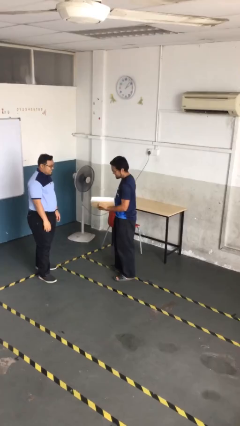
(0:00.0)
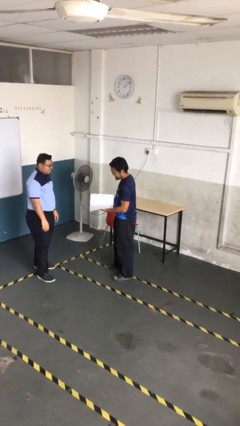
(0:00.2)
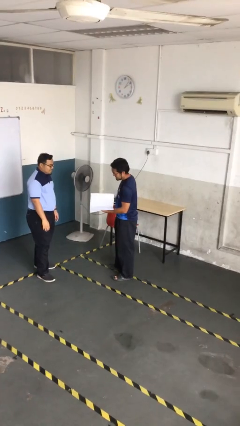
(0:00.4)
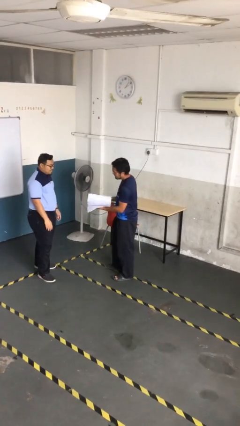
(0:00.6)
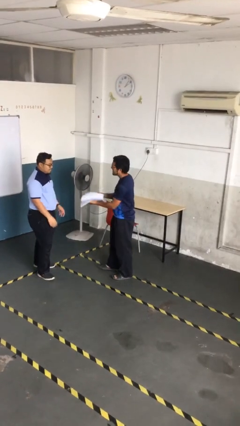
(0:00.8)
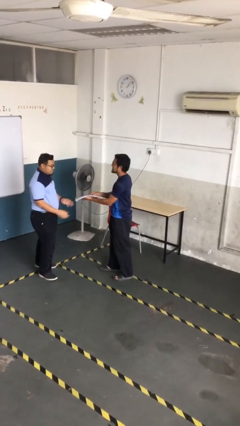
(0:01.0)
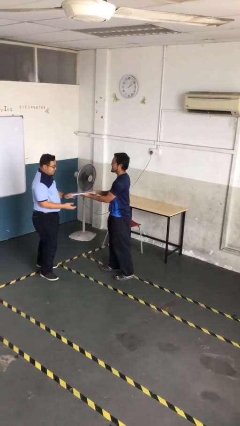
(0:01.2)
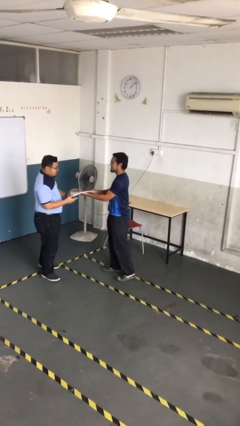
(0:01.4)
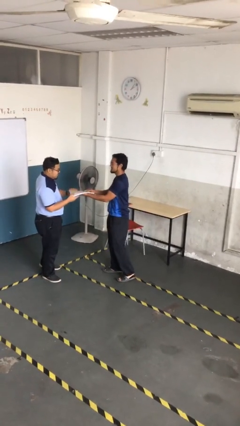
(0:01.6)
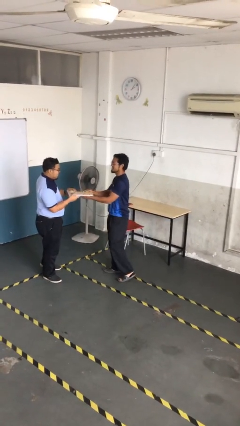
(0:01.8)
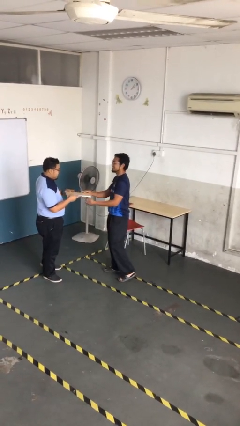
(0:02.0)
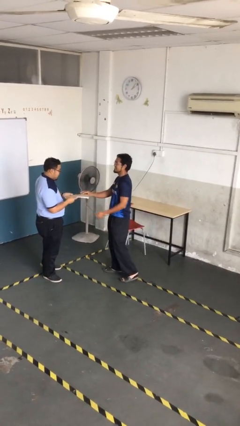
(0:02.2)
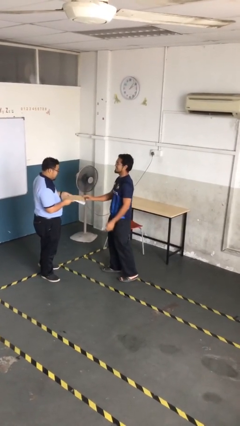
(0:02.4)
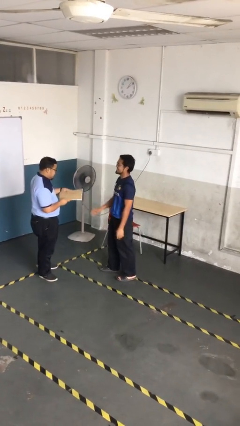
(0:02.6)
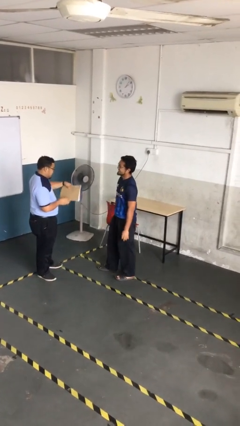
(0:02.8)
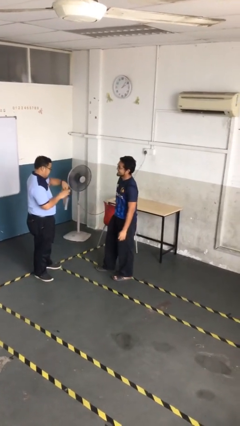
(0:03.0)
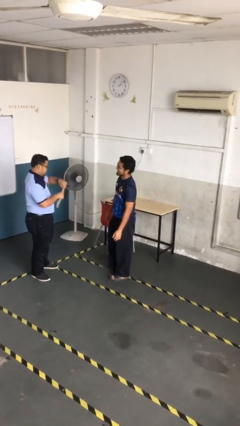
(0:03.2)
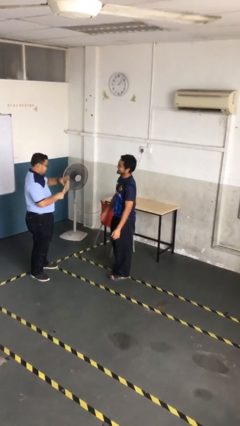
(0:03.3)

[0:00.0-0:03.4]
person transfers object to person

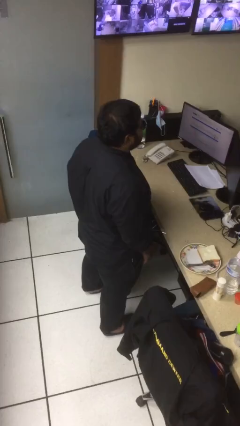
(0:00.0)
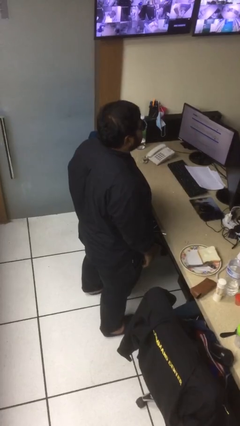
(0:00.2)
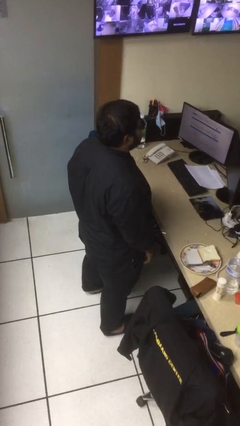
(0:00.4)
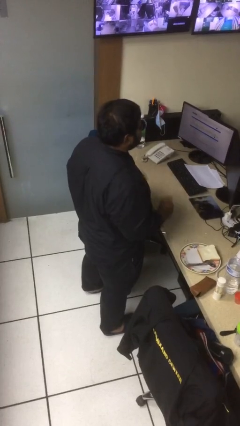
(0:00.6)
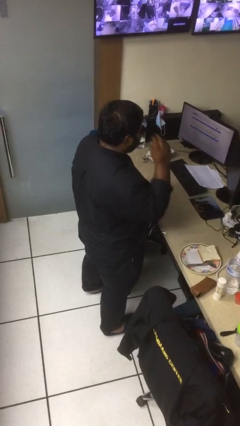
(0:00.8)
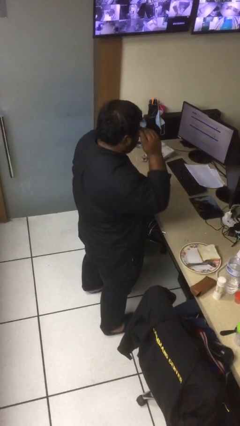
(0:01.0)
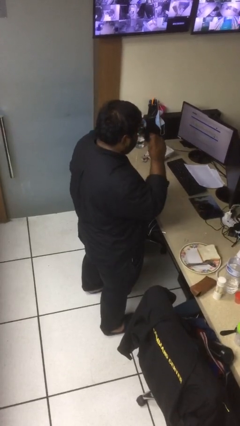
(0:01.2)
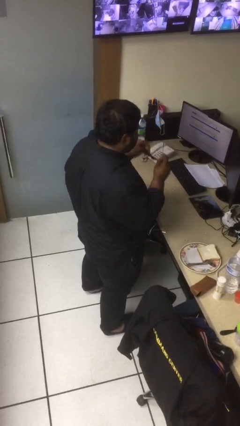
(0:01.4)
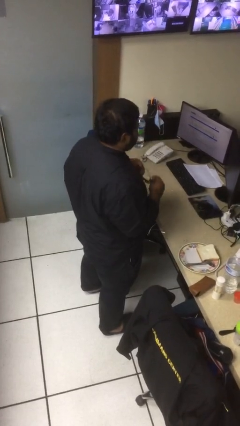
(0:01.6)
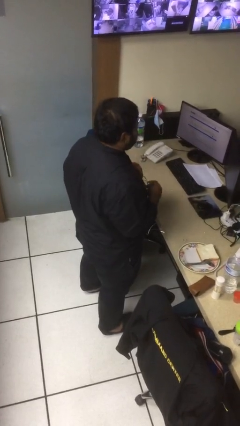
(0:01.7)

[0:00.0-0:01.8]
person takes off sunglasses

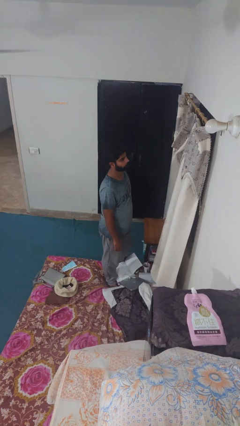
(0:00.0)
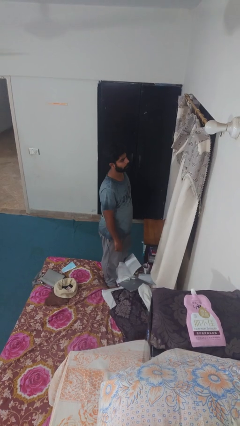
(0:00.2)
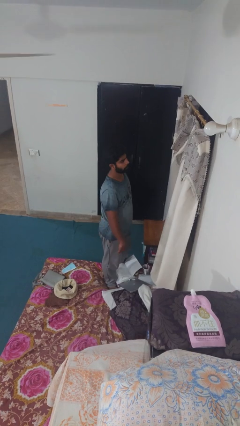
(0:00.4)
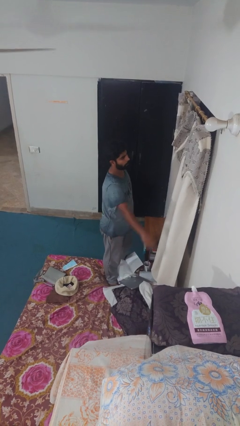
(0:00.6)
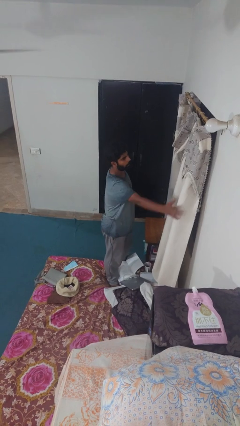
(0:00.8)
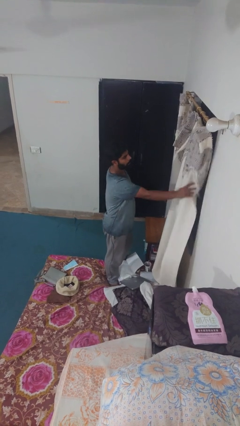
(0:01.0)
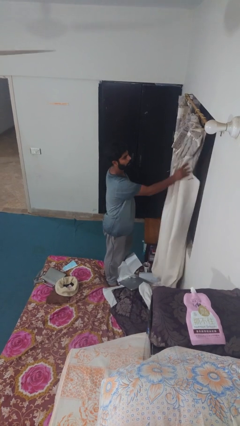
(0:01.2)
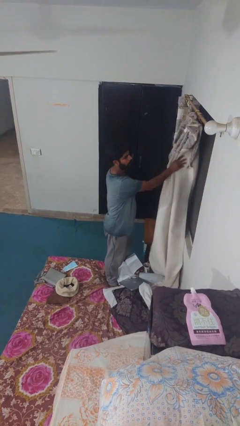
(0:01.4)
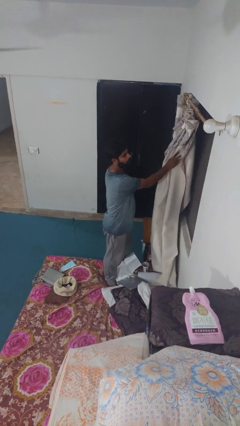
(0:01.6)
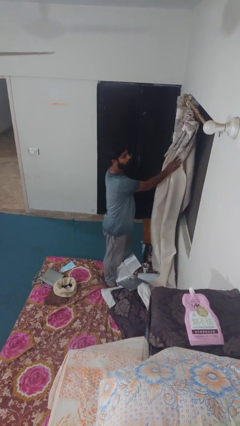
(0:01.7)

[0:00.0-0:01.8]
person opens curtains

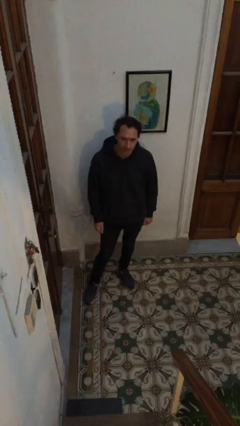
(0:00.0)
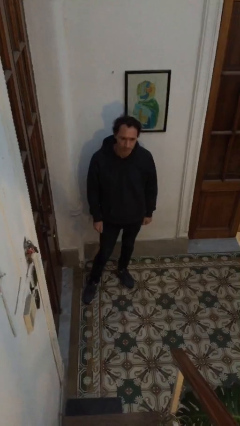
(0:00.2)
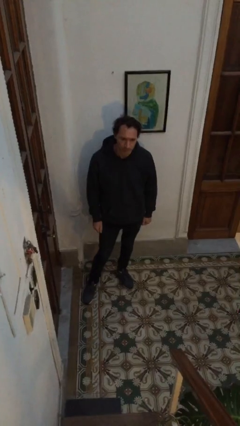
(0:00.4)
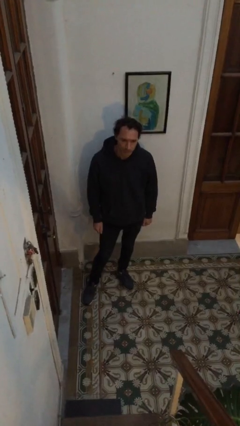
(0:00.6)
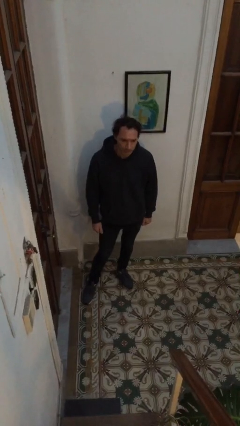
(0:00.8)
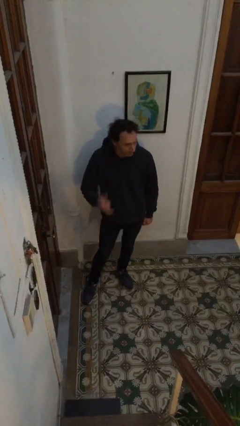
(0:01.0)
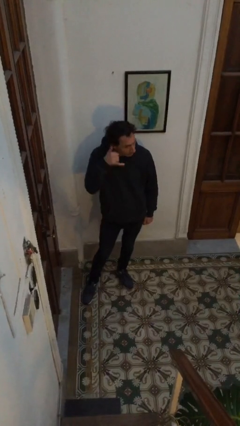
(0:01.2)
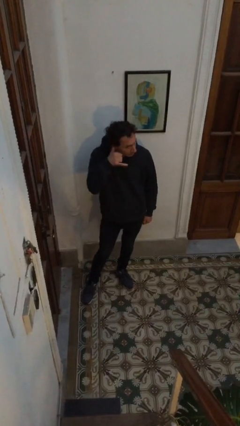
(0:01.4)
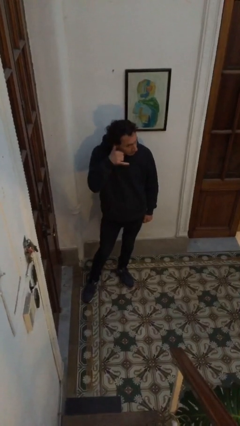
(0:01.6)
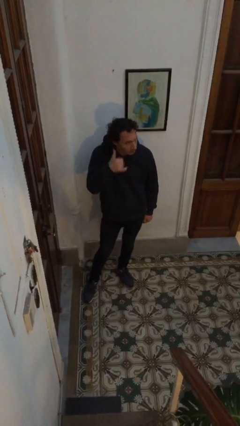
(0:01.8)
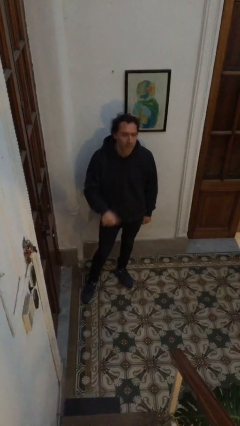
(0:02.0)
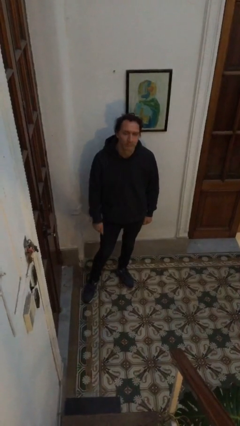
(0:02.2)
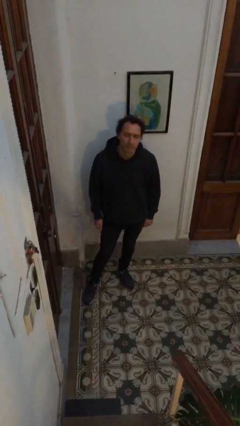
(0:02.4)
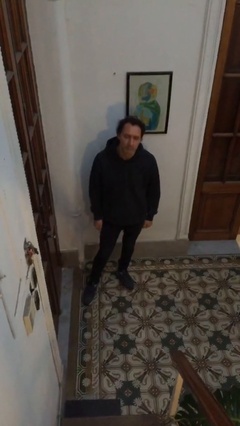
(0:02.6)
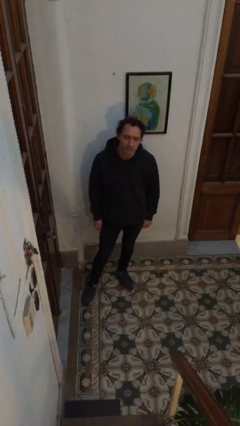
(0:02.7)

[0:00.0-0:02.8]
person gestures call me

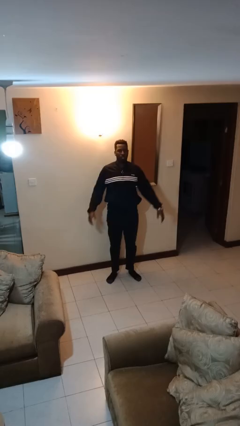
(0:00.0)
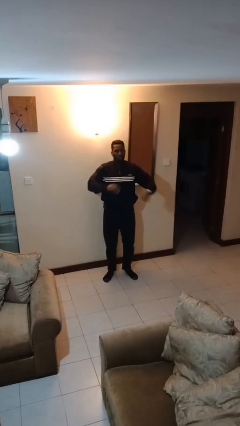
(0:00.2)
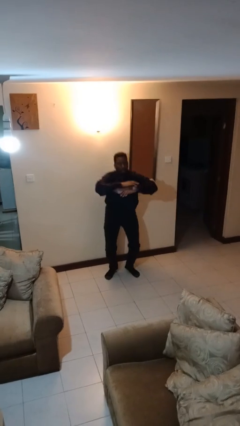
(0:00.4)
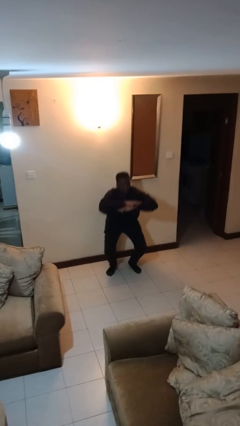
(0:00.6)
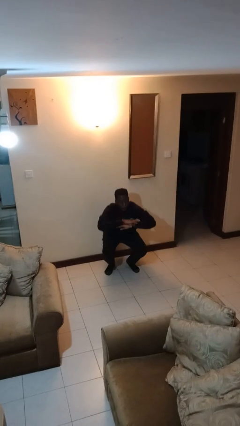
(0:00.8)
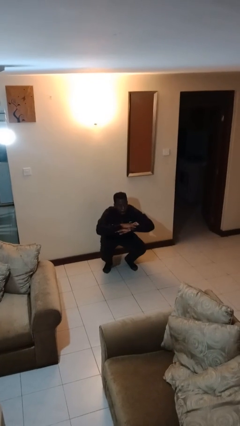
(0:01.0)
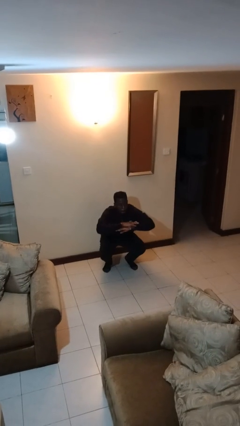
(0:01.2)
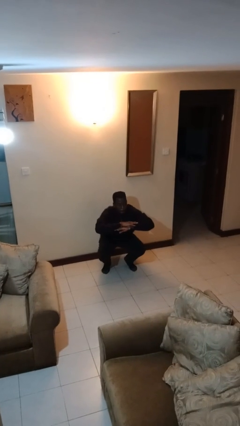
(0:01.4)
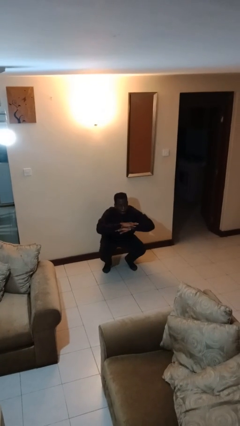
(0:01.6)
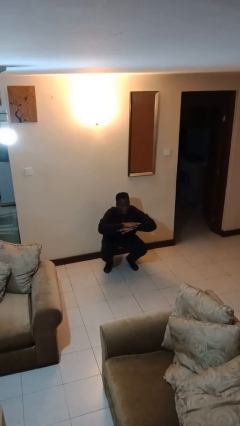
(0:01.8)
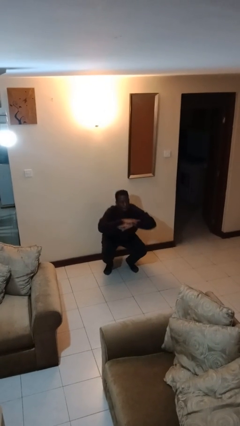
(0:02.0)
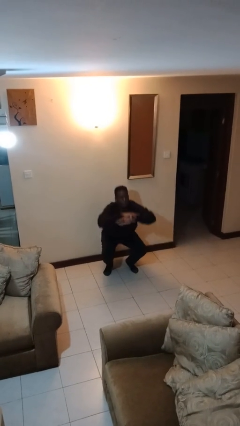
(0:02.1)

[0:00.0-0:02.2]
person squats

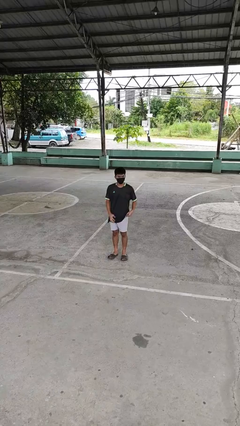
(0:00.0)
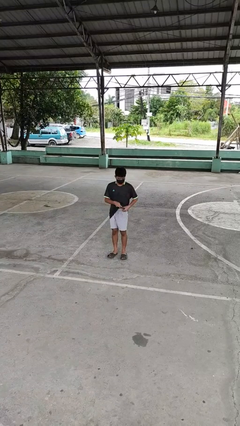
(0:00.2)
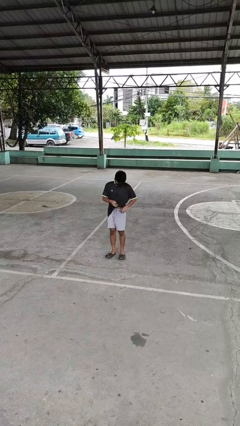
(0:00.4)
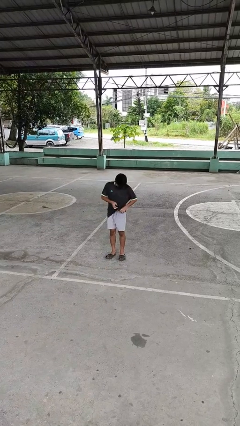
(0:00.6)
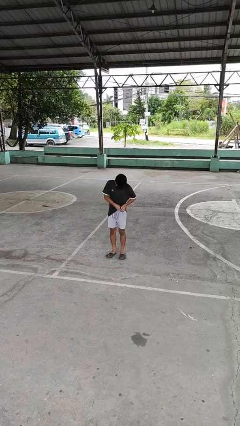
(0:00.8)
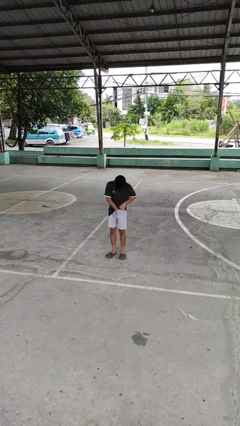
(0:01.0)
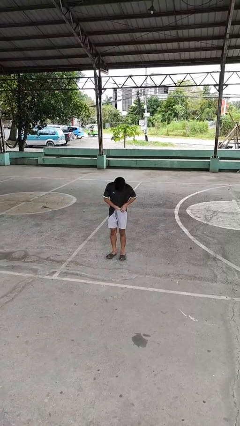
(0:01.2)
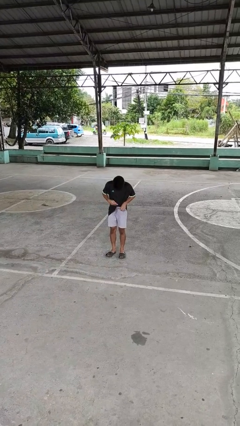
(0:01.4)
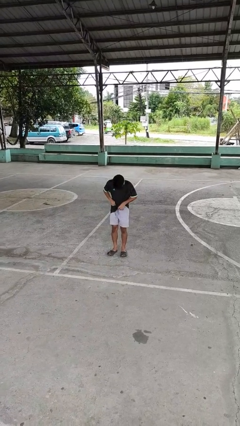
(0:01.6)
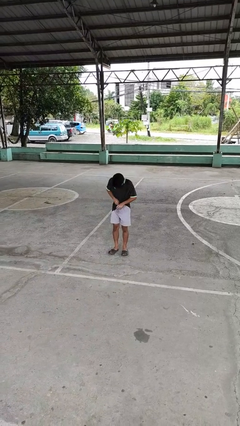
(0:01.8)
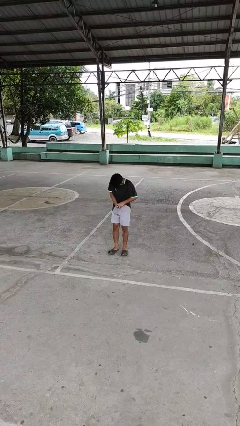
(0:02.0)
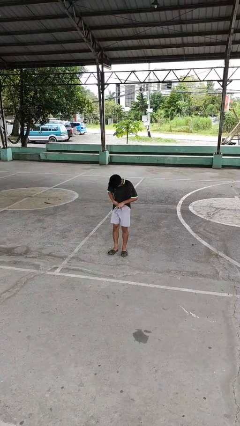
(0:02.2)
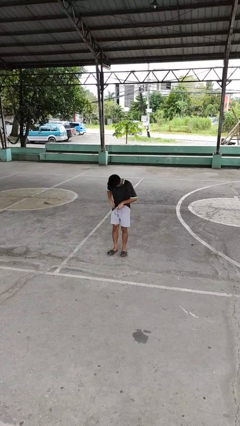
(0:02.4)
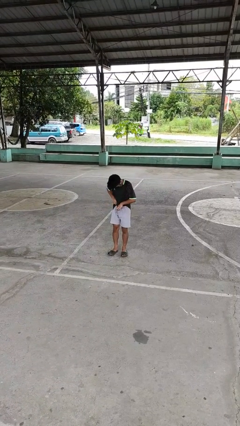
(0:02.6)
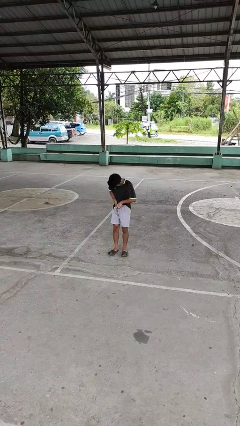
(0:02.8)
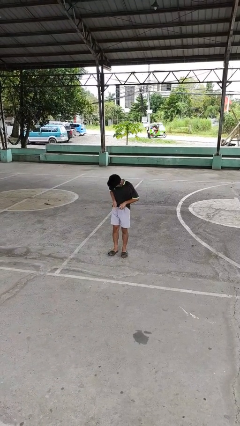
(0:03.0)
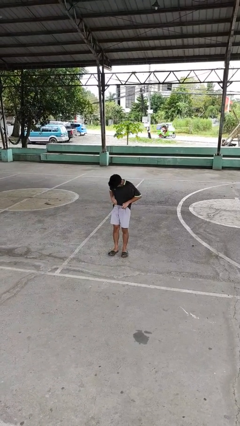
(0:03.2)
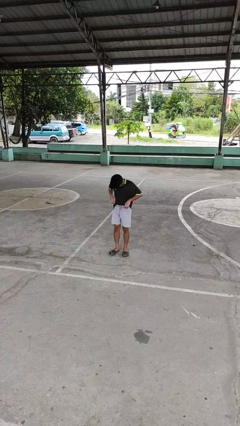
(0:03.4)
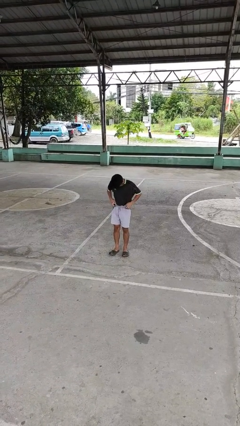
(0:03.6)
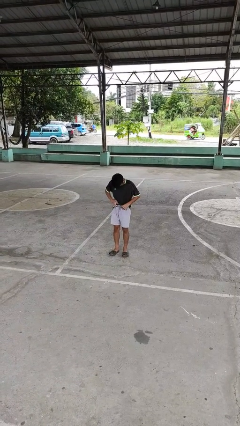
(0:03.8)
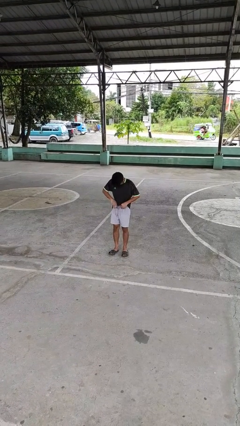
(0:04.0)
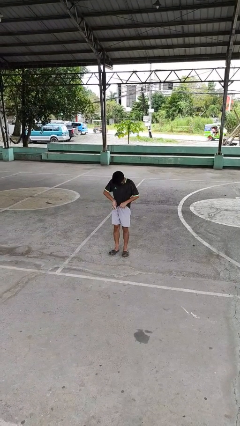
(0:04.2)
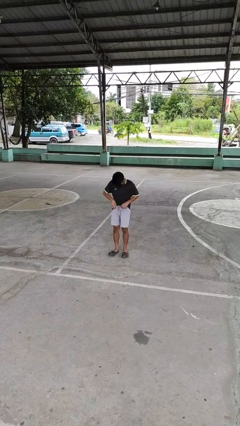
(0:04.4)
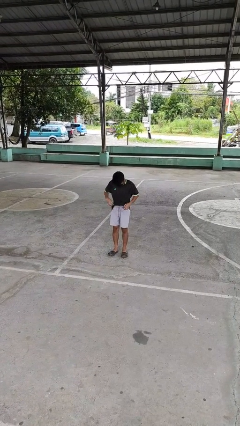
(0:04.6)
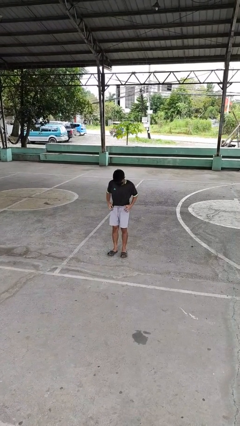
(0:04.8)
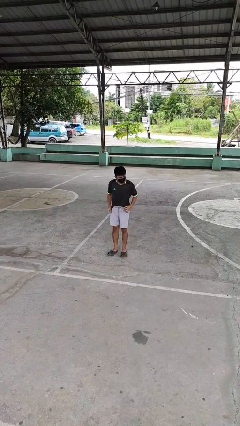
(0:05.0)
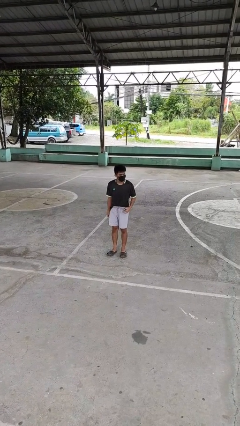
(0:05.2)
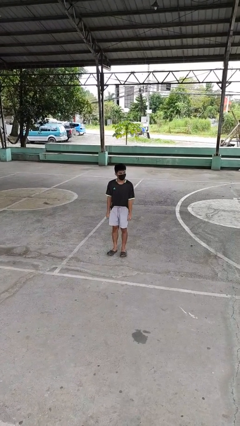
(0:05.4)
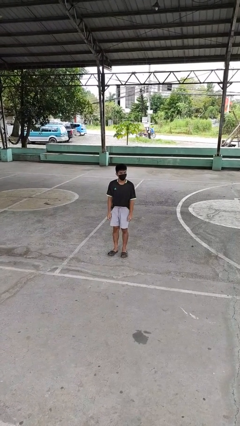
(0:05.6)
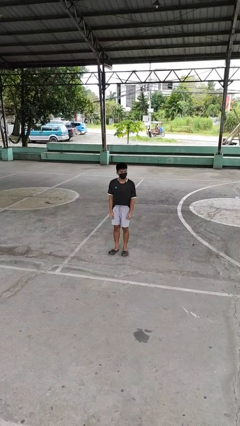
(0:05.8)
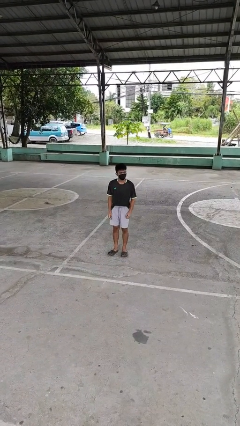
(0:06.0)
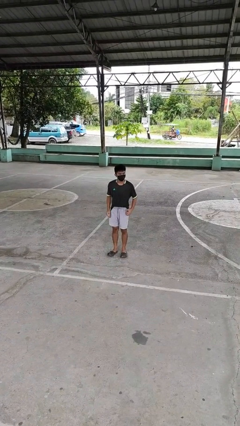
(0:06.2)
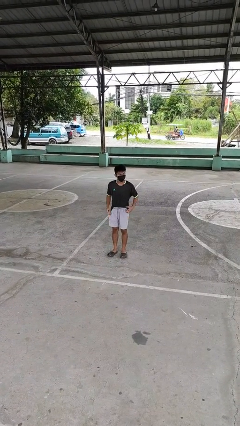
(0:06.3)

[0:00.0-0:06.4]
person tucks in shirt
